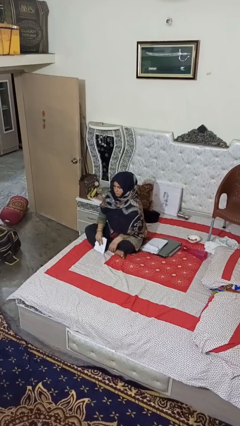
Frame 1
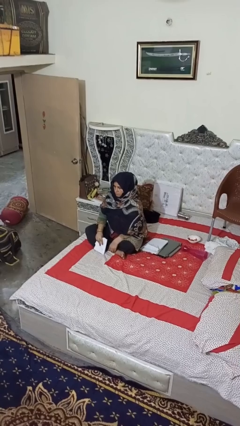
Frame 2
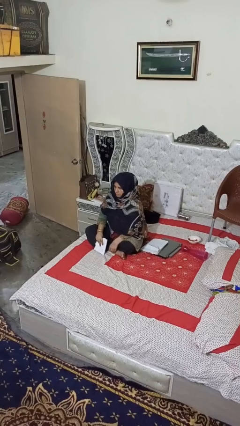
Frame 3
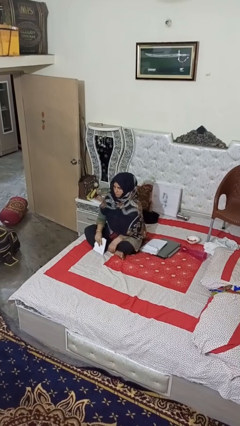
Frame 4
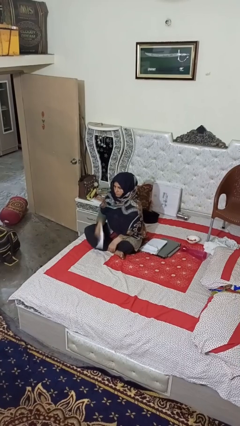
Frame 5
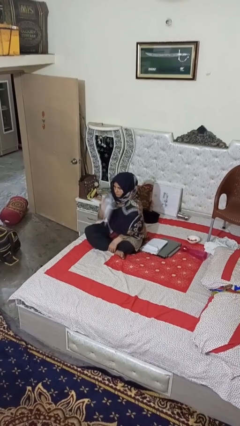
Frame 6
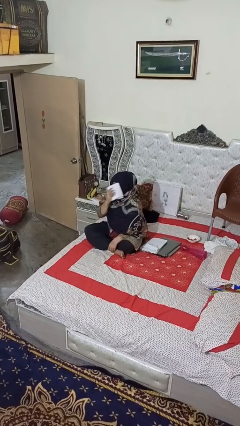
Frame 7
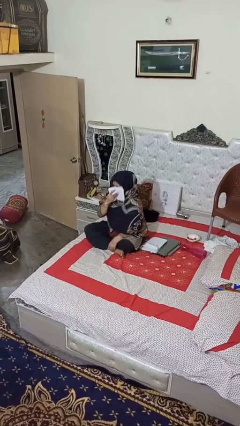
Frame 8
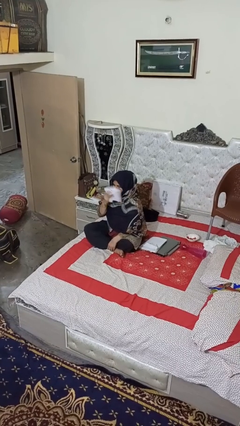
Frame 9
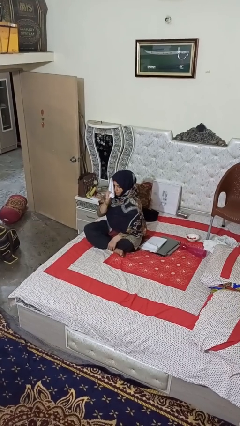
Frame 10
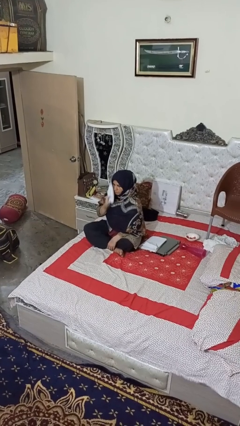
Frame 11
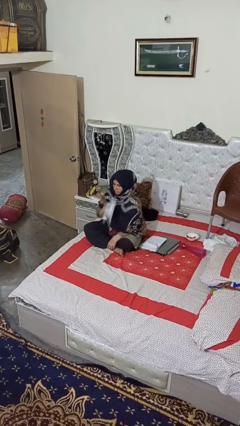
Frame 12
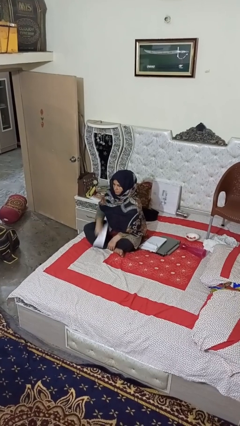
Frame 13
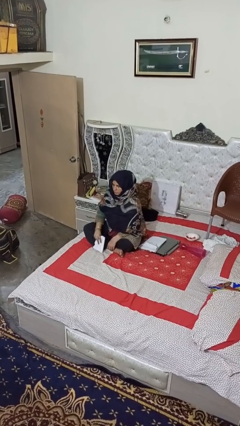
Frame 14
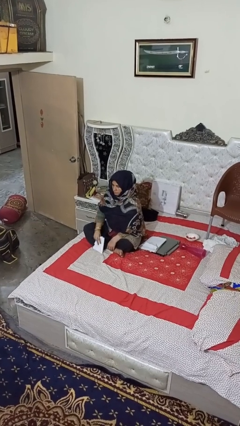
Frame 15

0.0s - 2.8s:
person wipes mouth with napkin

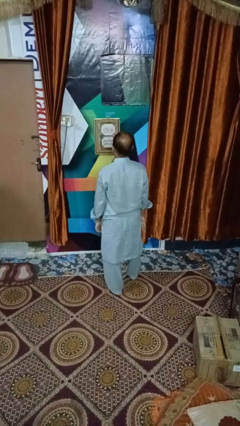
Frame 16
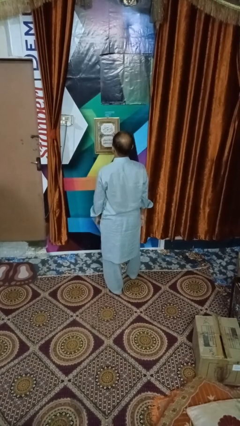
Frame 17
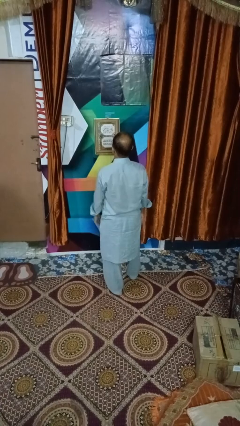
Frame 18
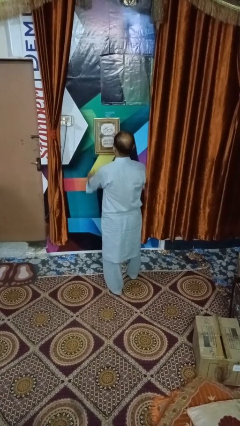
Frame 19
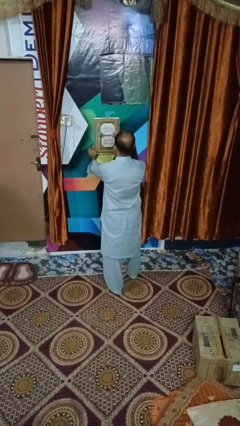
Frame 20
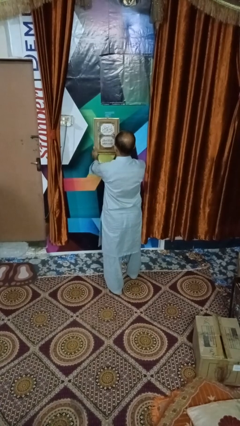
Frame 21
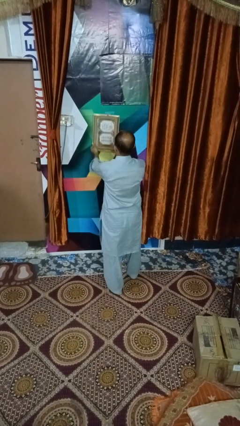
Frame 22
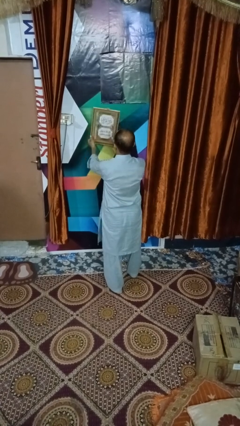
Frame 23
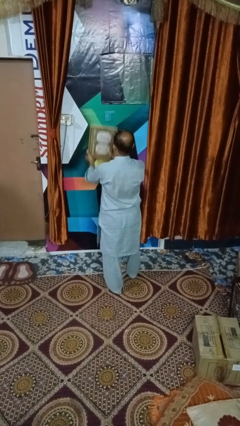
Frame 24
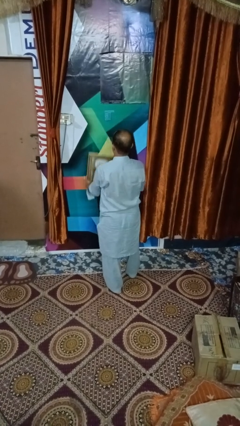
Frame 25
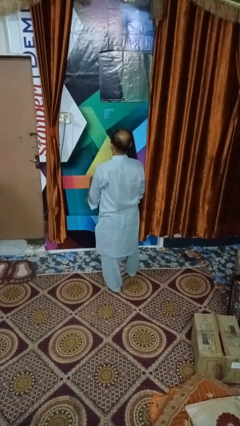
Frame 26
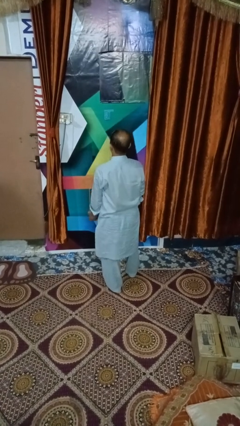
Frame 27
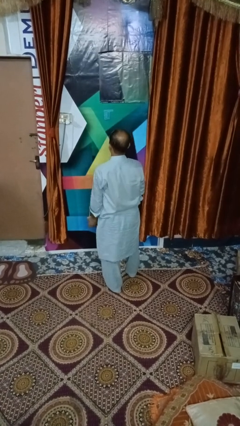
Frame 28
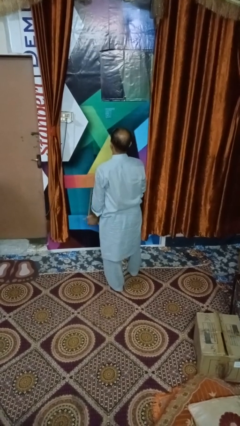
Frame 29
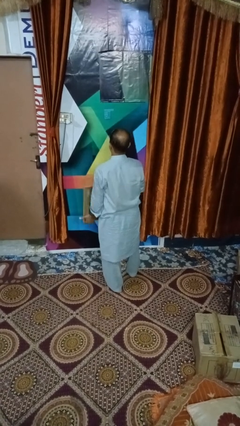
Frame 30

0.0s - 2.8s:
person takes down picture frame

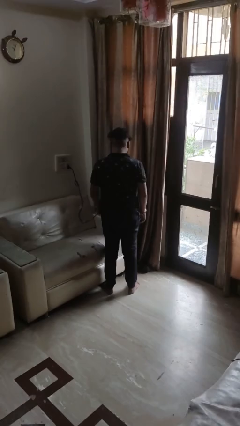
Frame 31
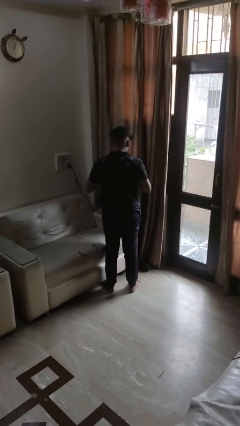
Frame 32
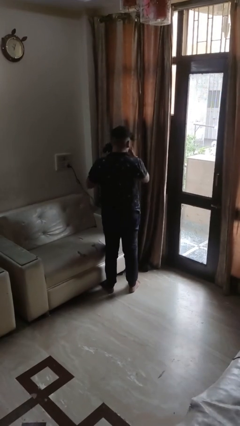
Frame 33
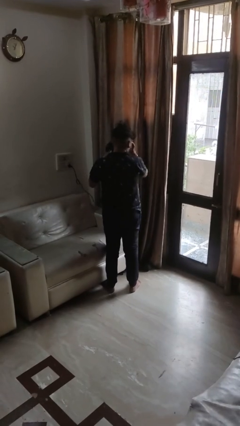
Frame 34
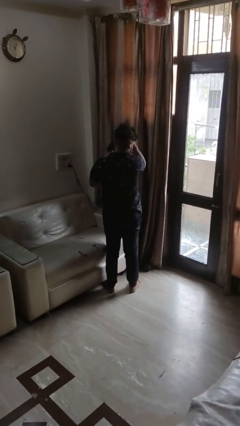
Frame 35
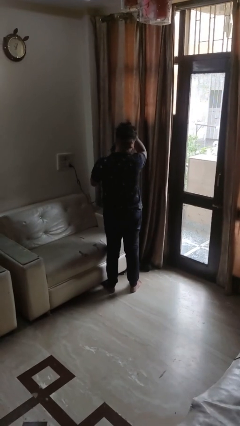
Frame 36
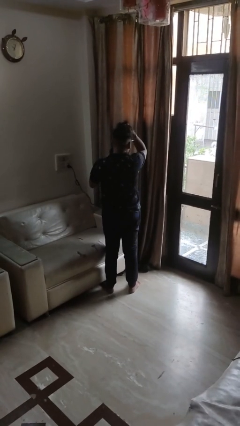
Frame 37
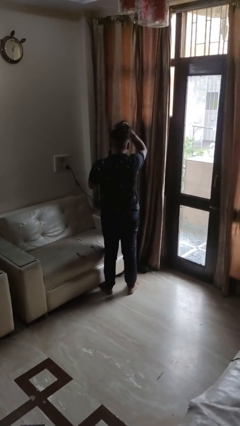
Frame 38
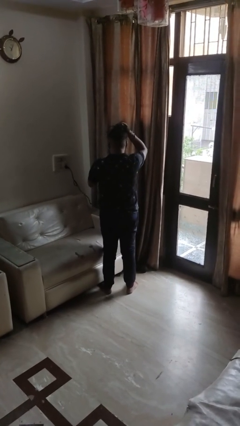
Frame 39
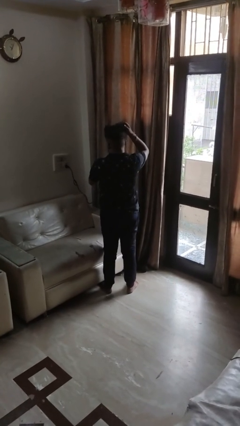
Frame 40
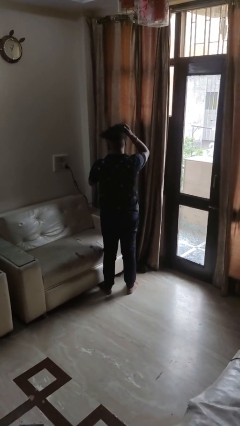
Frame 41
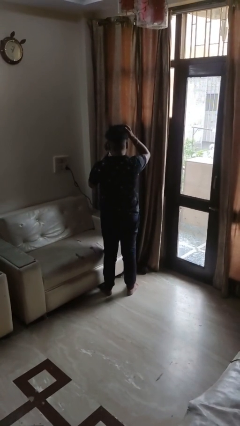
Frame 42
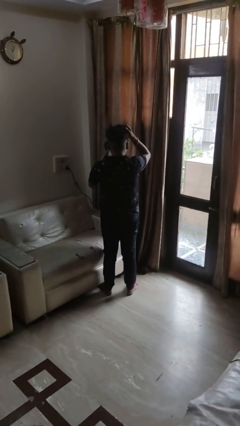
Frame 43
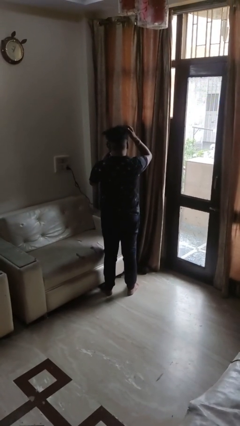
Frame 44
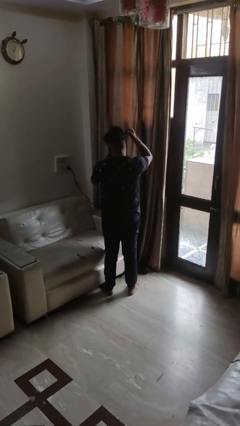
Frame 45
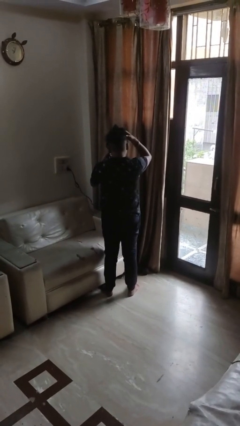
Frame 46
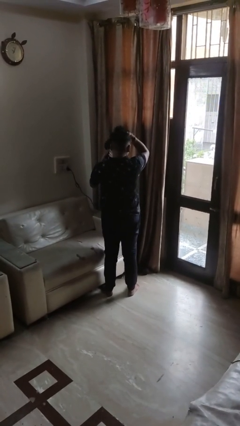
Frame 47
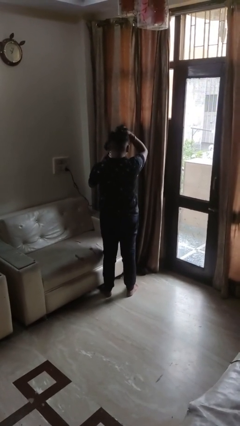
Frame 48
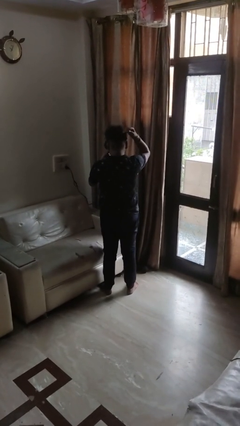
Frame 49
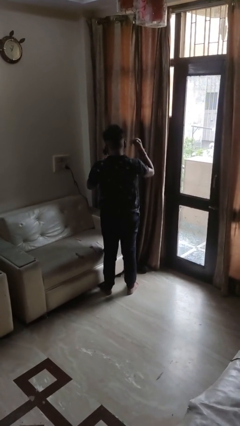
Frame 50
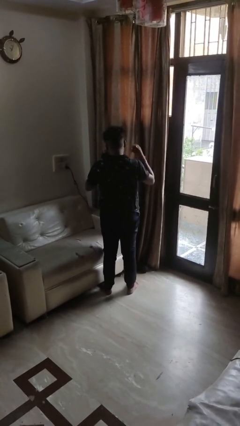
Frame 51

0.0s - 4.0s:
person dries hair with hairdryer

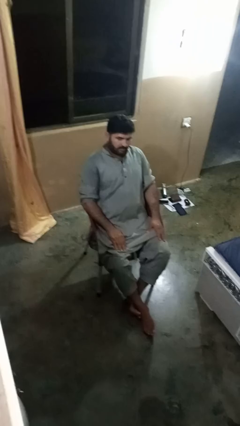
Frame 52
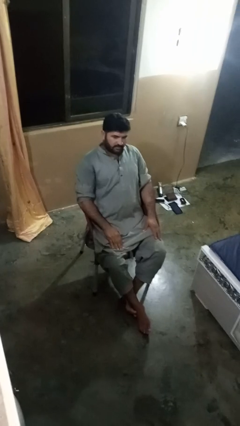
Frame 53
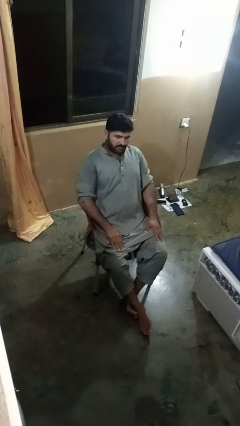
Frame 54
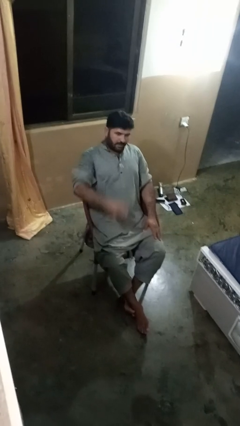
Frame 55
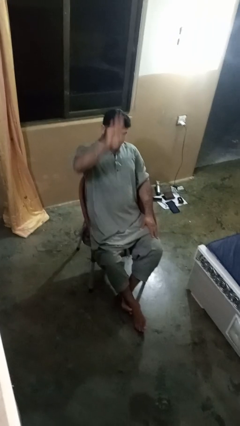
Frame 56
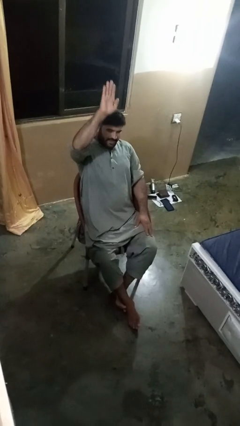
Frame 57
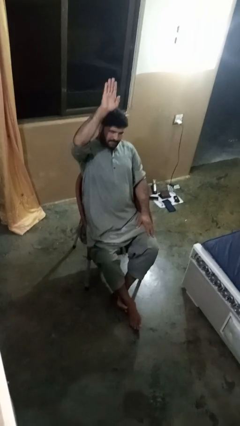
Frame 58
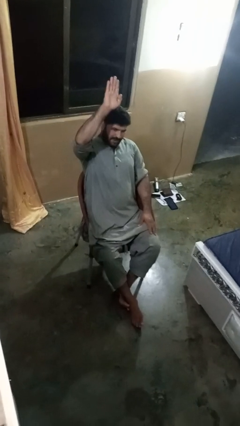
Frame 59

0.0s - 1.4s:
person gestures number five

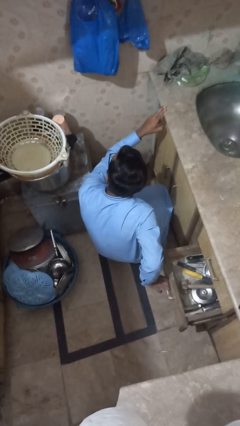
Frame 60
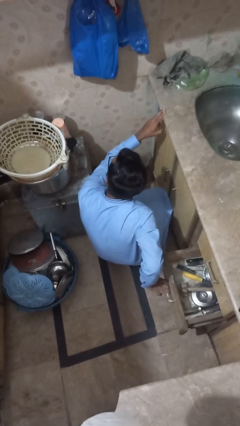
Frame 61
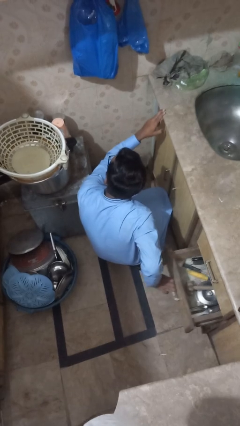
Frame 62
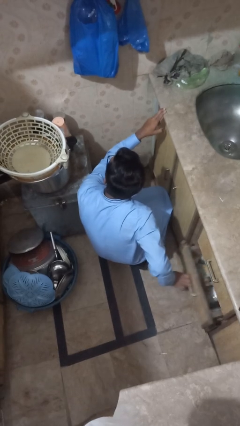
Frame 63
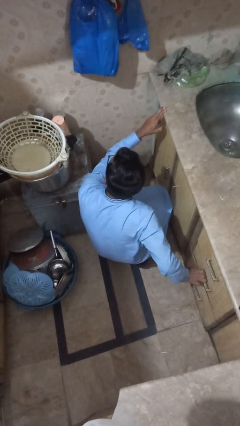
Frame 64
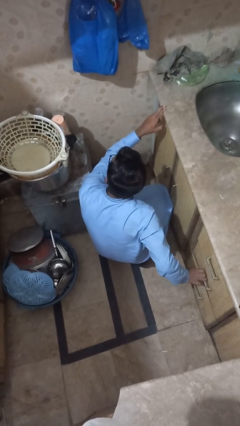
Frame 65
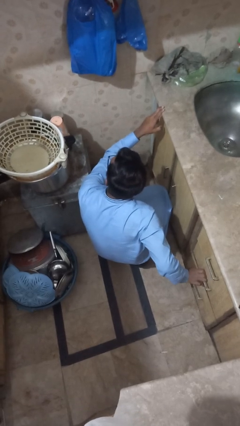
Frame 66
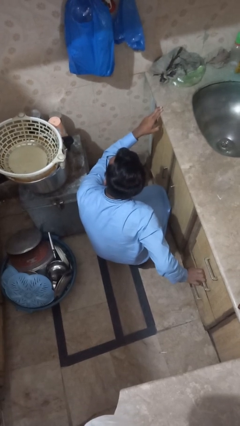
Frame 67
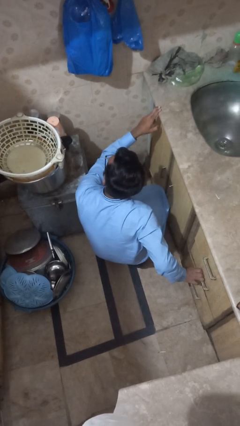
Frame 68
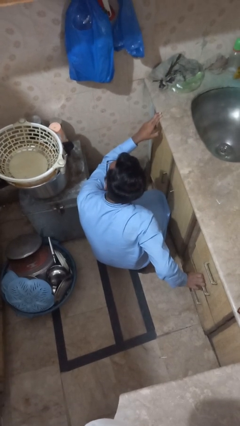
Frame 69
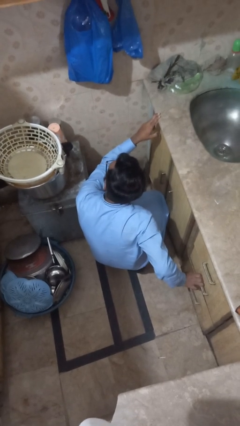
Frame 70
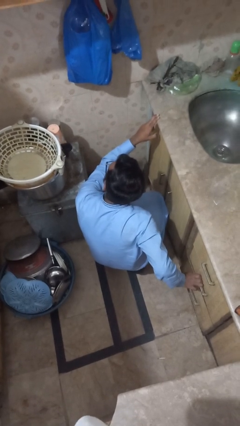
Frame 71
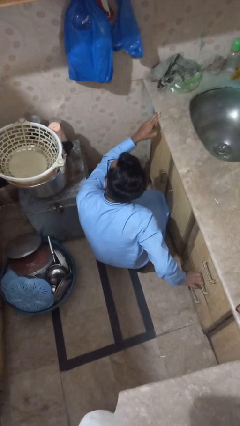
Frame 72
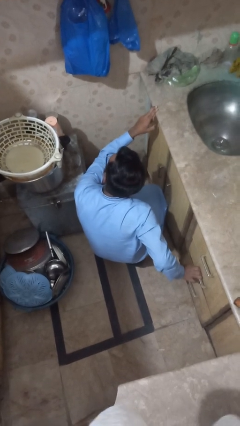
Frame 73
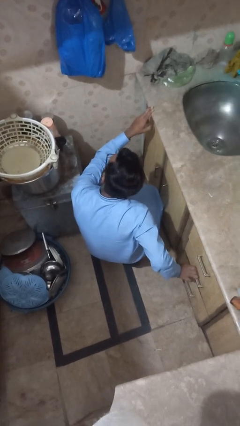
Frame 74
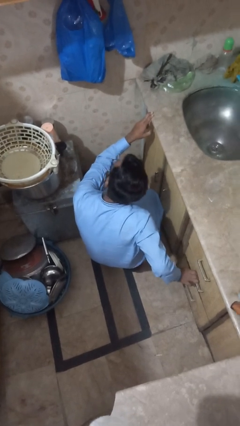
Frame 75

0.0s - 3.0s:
person closes kitchen drawer

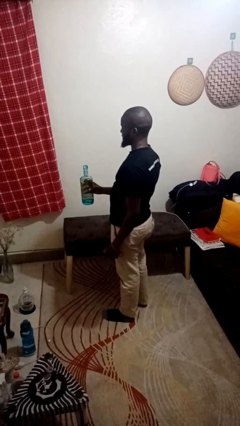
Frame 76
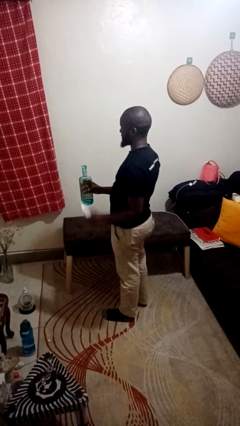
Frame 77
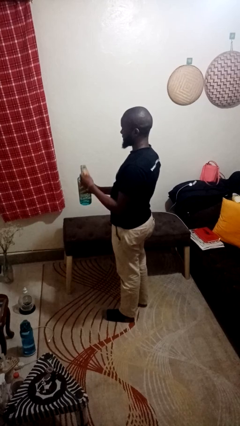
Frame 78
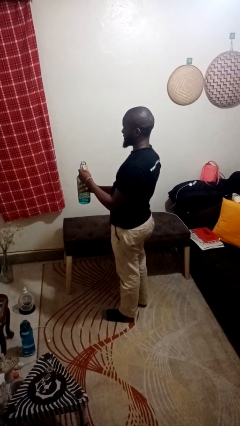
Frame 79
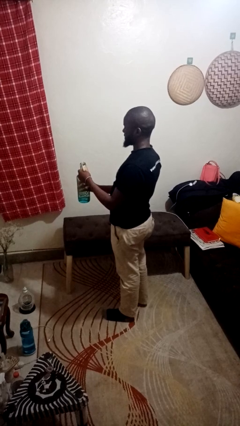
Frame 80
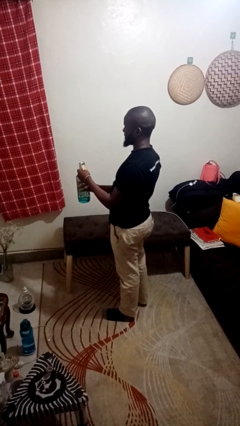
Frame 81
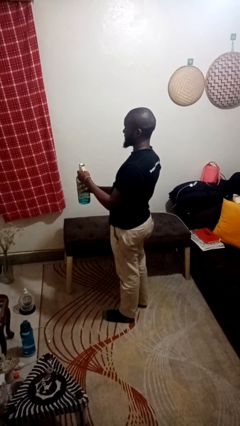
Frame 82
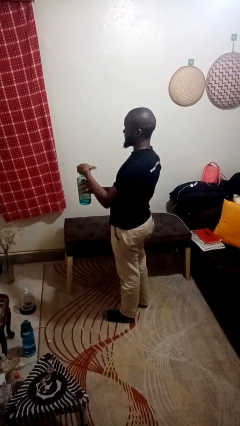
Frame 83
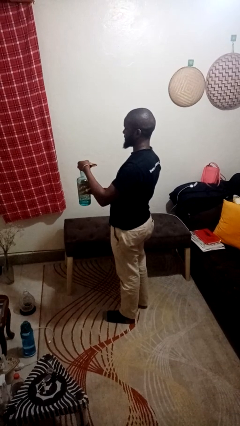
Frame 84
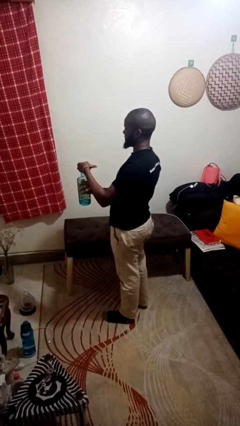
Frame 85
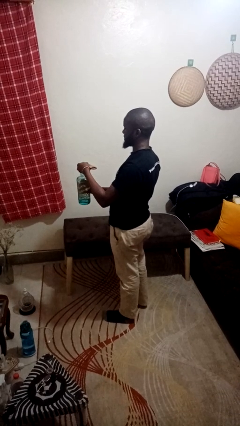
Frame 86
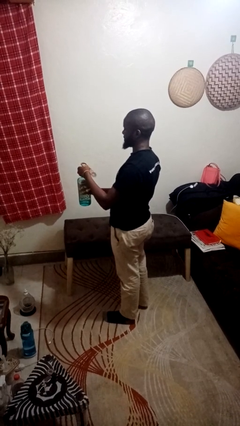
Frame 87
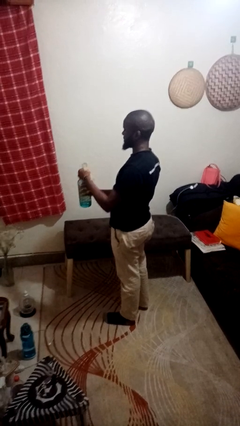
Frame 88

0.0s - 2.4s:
person opens can with can opener

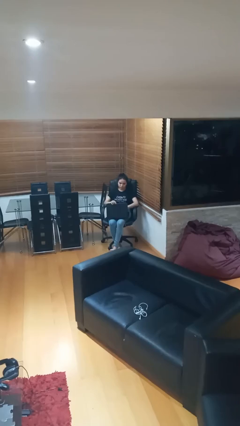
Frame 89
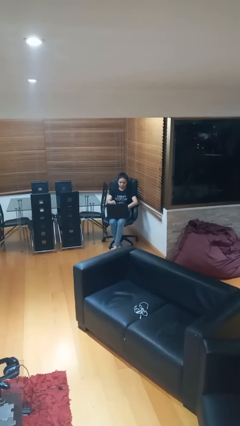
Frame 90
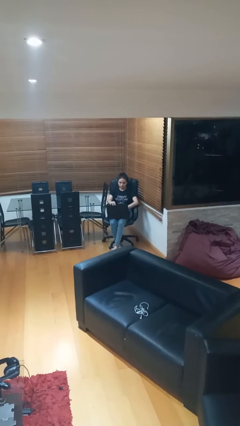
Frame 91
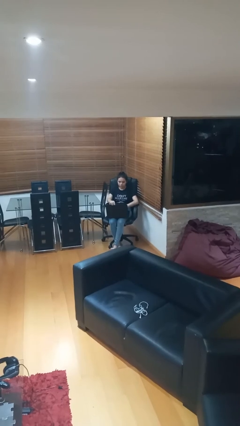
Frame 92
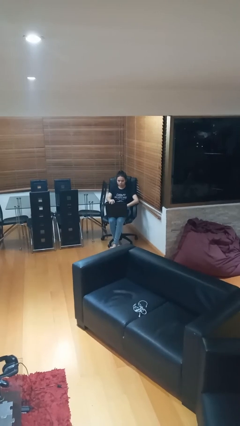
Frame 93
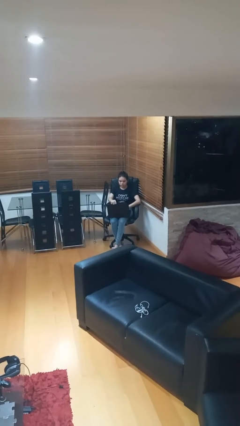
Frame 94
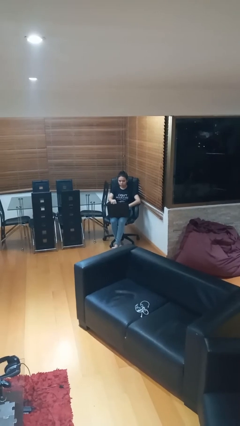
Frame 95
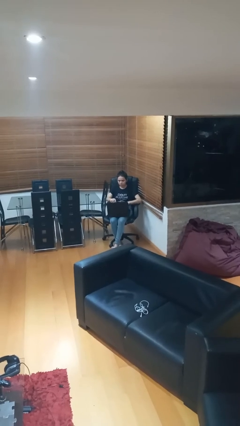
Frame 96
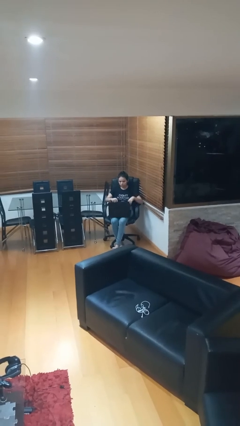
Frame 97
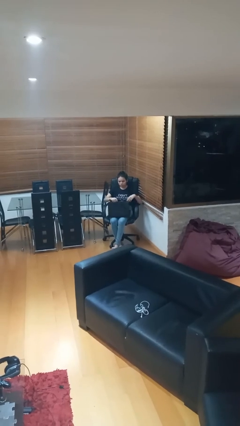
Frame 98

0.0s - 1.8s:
person interacts with laptop
